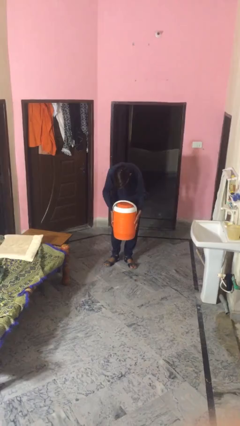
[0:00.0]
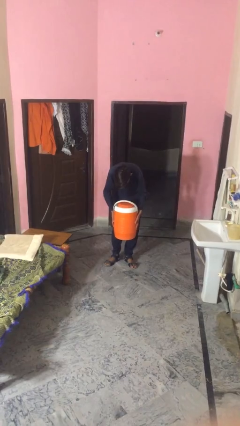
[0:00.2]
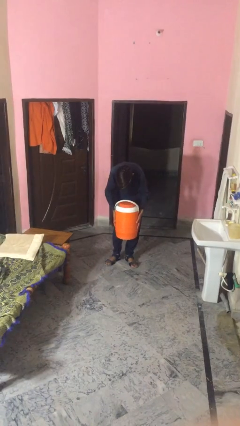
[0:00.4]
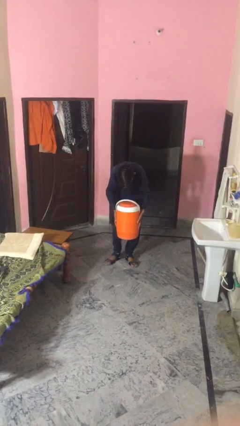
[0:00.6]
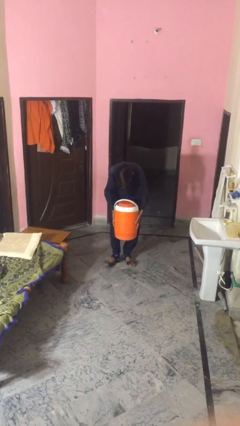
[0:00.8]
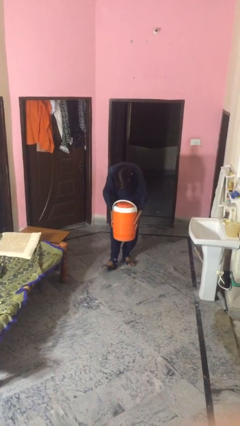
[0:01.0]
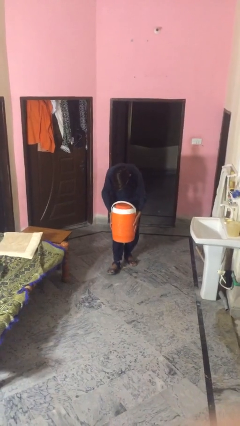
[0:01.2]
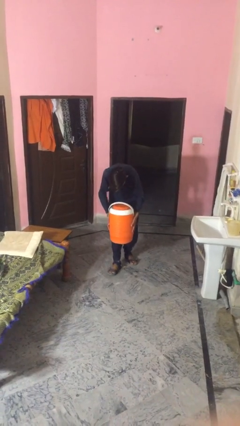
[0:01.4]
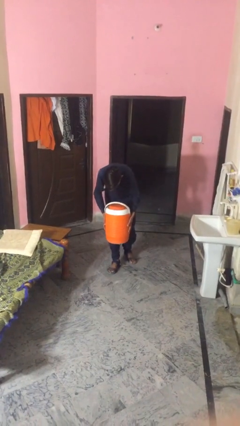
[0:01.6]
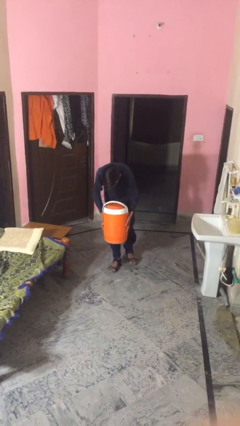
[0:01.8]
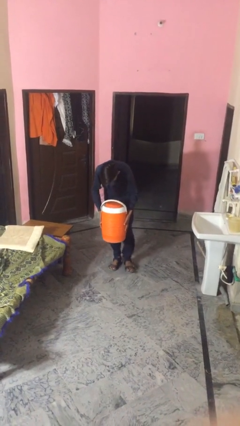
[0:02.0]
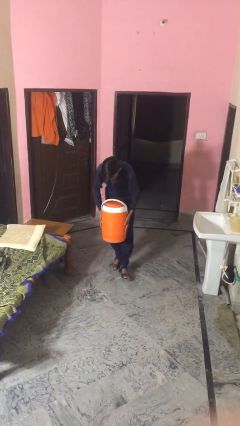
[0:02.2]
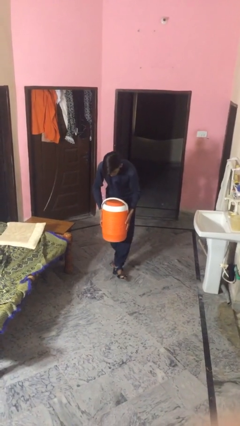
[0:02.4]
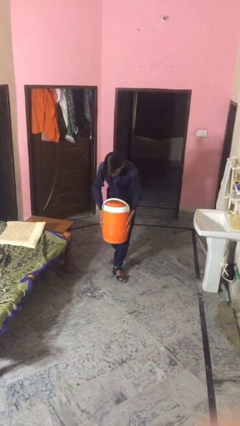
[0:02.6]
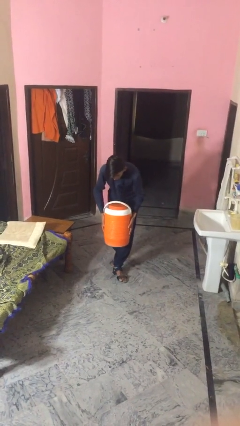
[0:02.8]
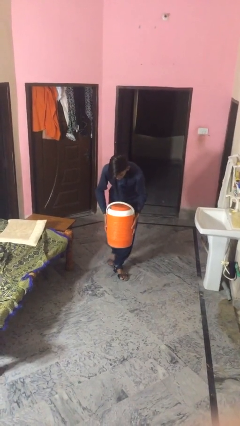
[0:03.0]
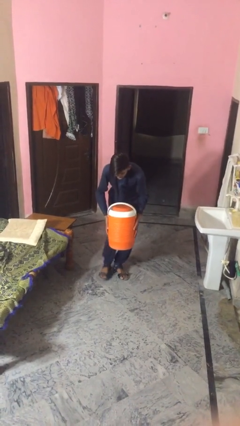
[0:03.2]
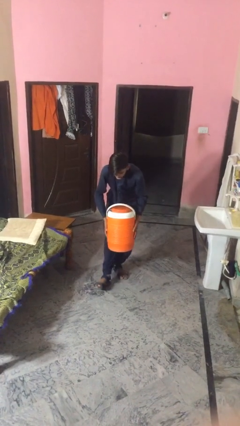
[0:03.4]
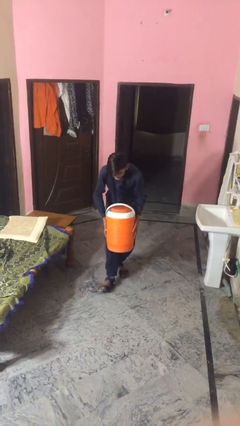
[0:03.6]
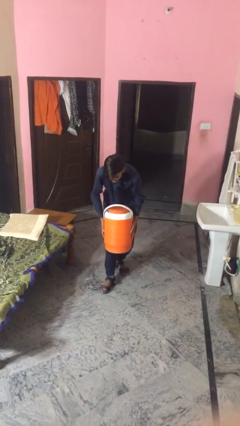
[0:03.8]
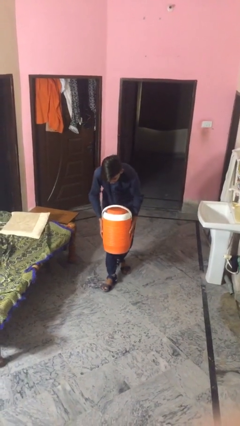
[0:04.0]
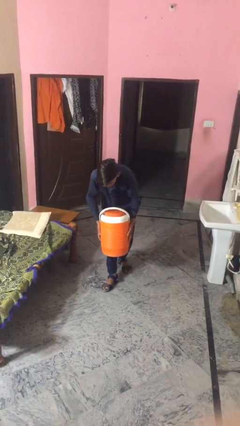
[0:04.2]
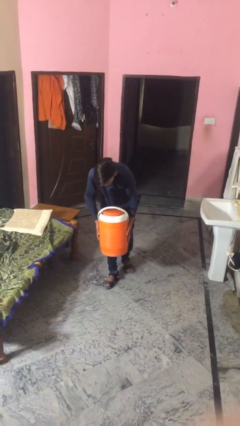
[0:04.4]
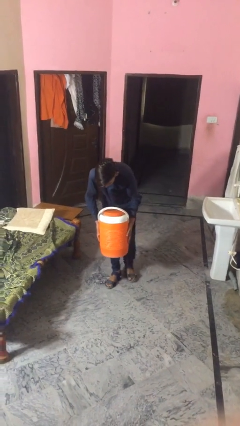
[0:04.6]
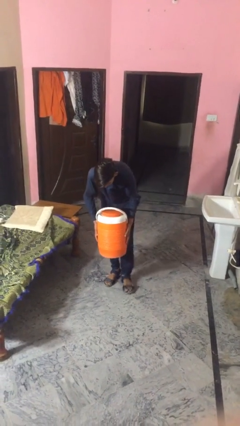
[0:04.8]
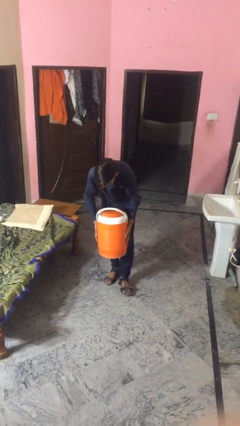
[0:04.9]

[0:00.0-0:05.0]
person carries heavy object

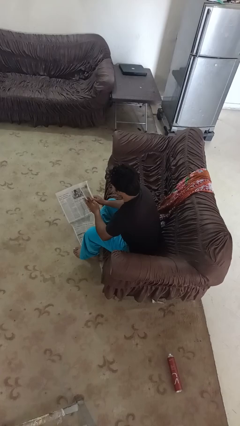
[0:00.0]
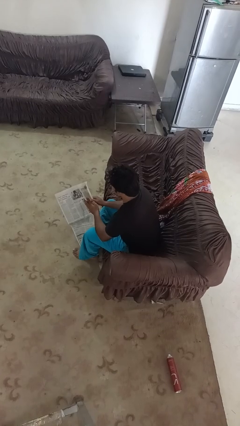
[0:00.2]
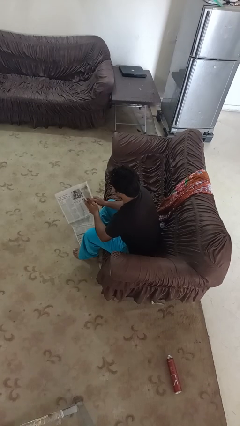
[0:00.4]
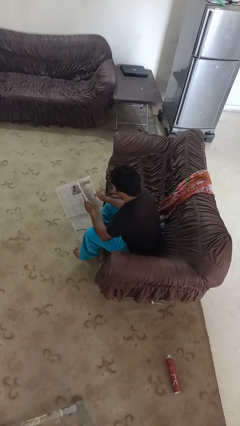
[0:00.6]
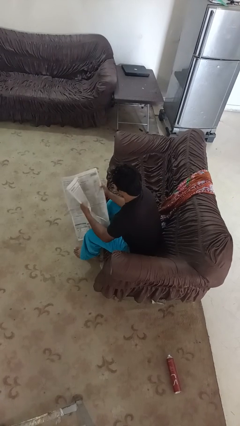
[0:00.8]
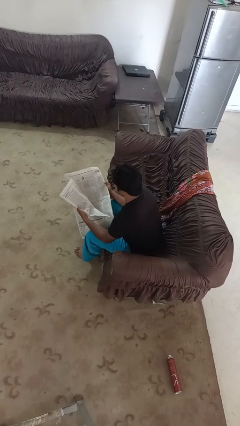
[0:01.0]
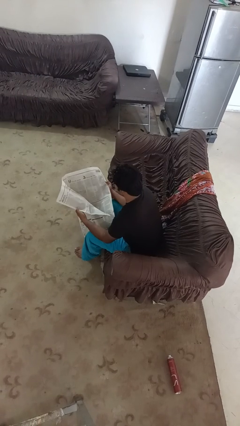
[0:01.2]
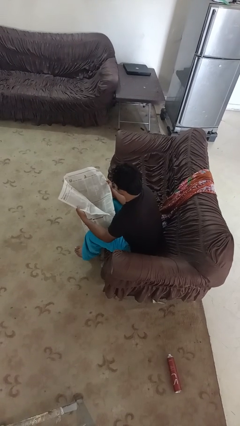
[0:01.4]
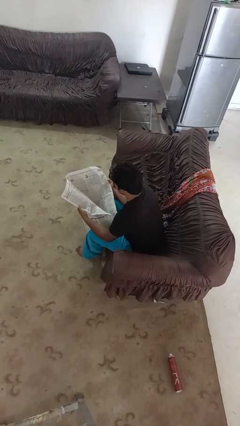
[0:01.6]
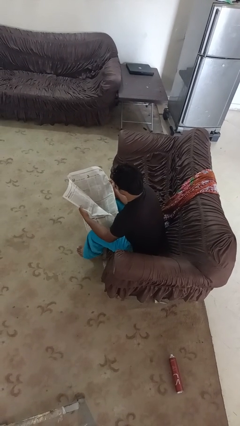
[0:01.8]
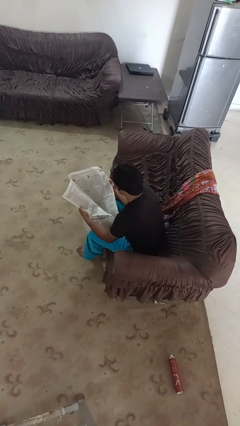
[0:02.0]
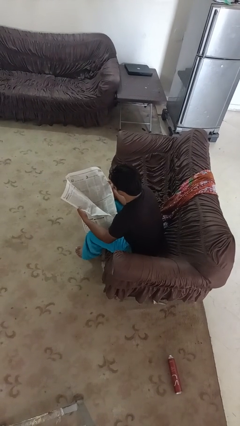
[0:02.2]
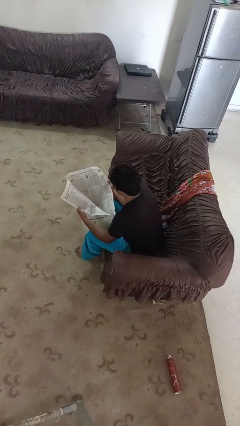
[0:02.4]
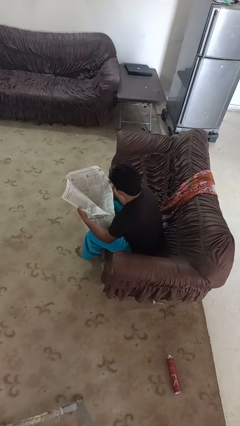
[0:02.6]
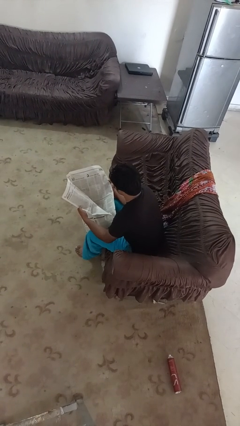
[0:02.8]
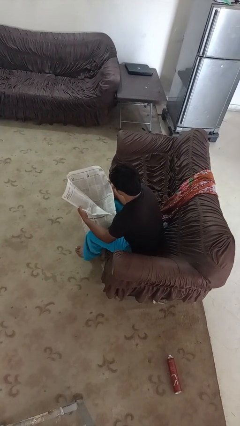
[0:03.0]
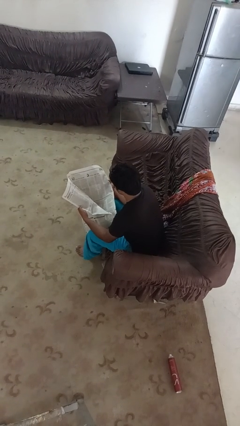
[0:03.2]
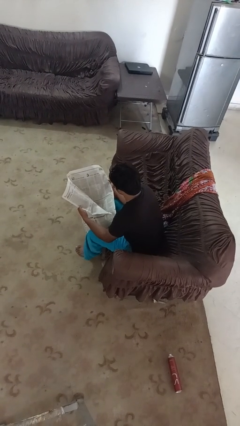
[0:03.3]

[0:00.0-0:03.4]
person reads newspaper

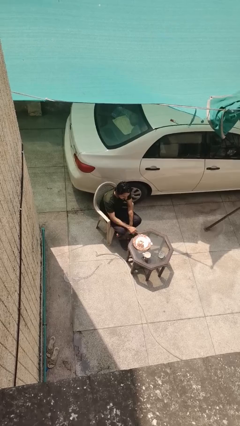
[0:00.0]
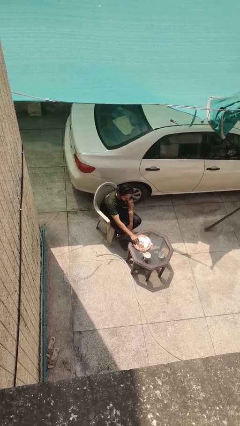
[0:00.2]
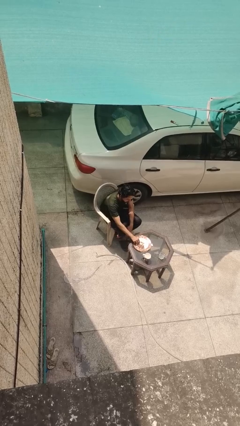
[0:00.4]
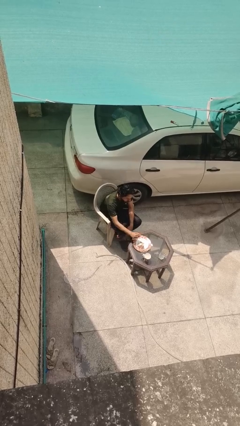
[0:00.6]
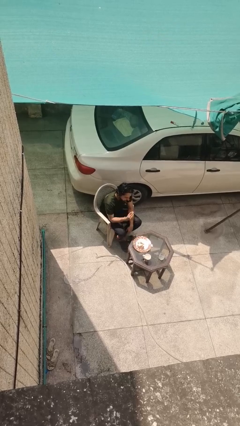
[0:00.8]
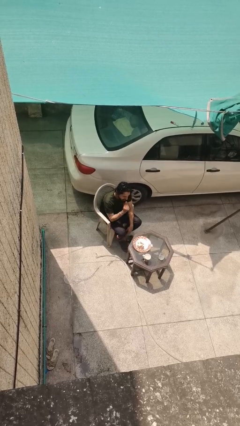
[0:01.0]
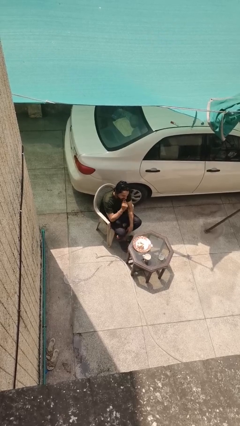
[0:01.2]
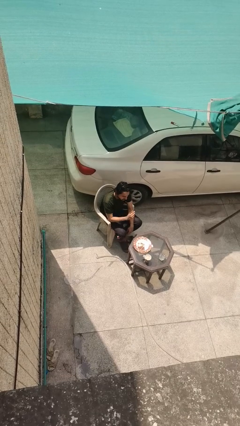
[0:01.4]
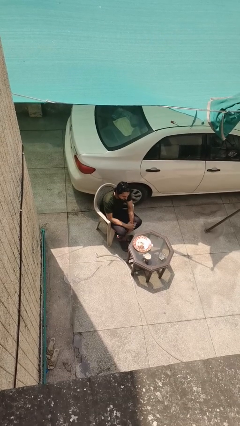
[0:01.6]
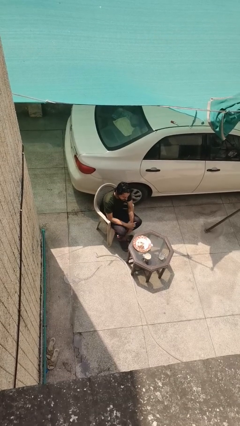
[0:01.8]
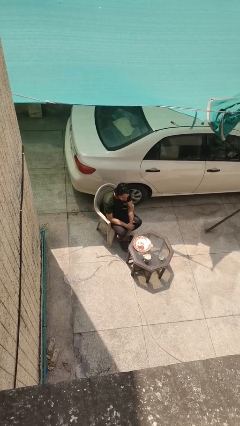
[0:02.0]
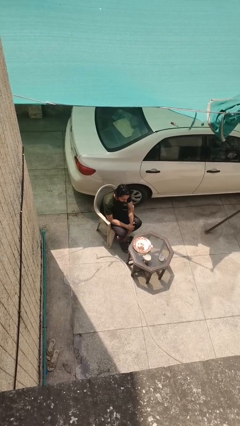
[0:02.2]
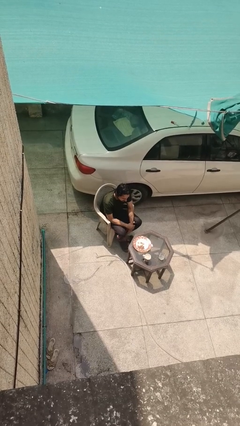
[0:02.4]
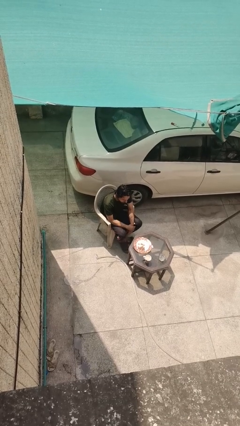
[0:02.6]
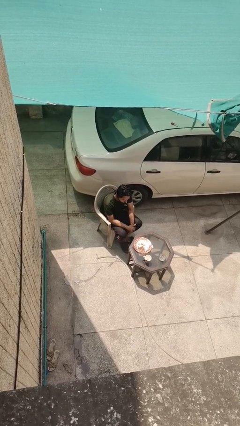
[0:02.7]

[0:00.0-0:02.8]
person eats with hands

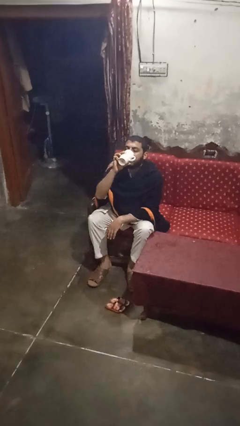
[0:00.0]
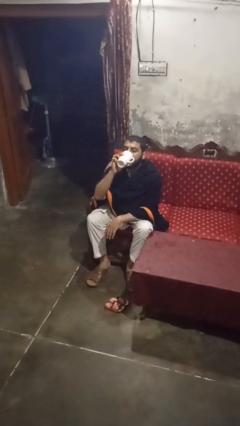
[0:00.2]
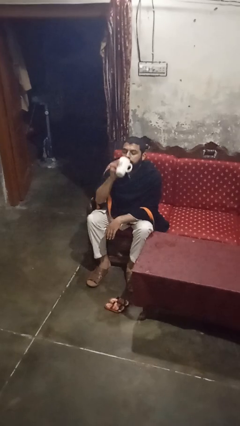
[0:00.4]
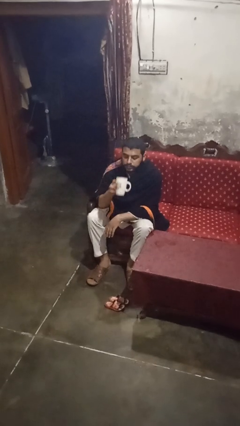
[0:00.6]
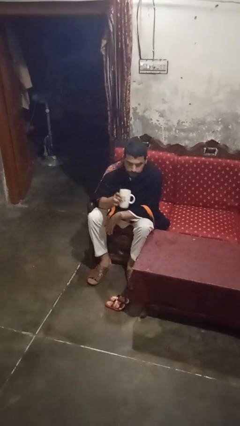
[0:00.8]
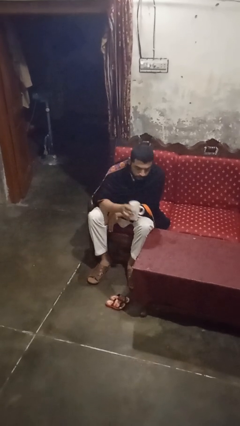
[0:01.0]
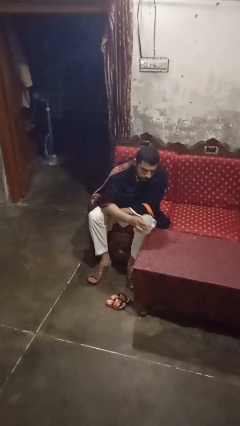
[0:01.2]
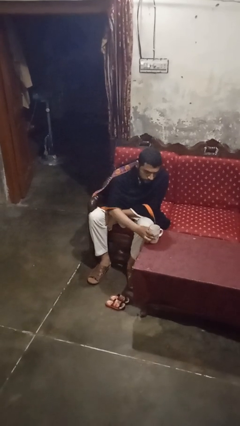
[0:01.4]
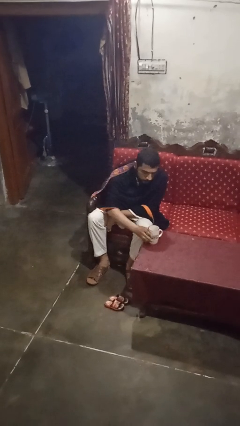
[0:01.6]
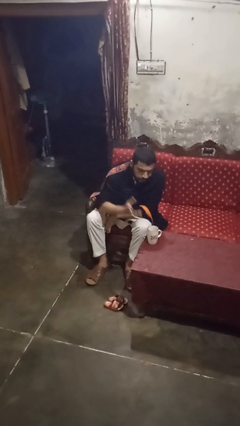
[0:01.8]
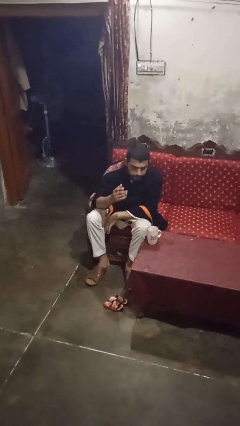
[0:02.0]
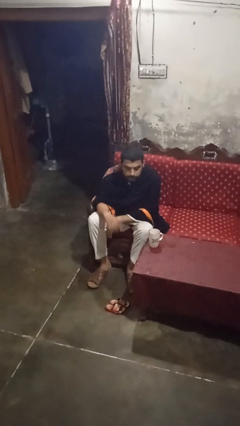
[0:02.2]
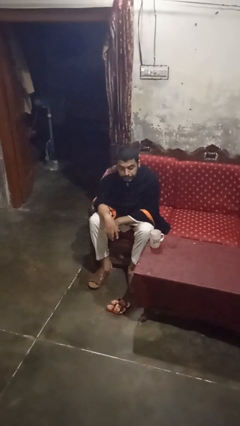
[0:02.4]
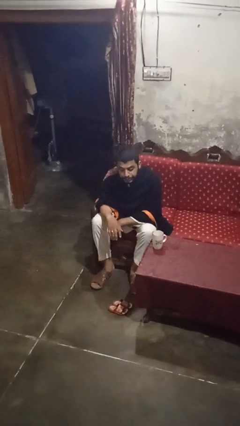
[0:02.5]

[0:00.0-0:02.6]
person puts down object on table

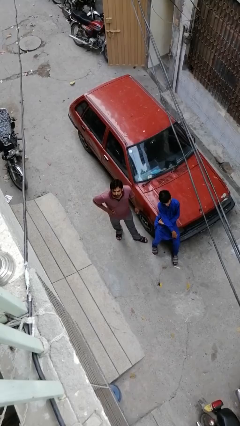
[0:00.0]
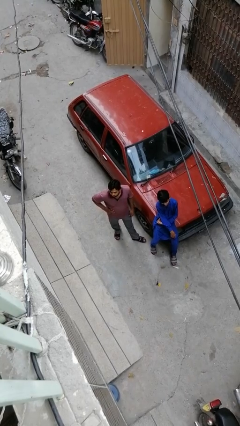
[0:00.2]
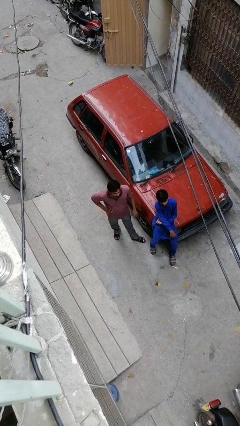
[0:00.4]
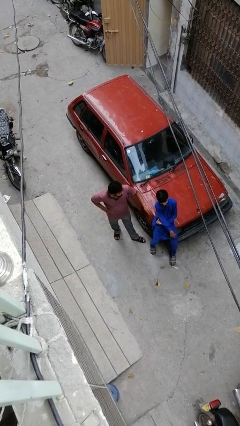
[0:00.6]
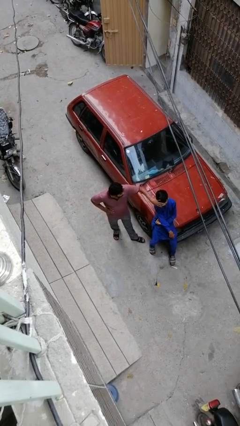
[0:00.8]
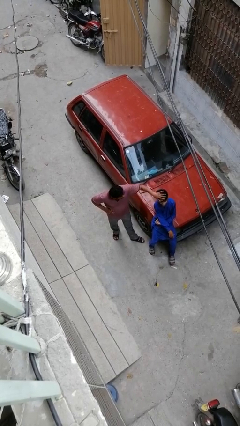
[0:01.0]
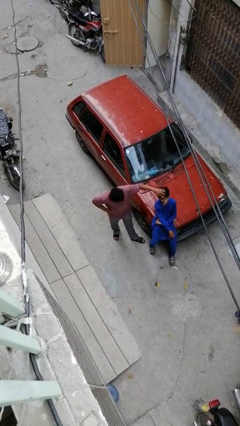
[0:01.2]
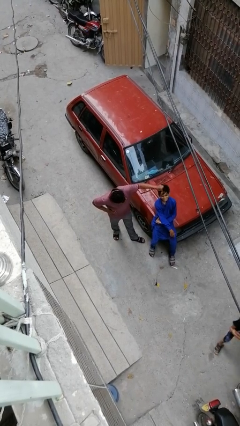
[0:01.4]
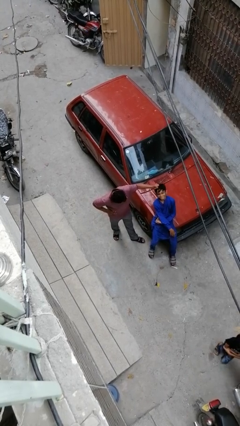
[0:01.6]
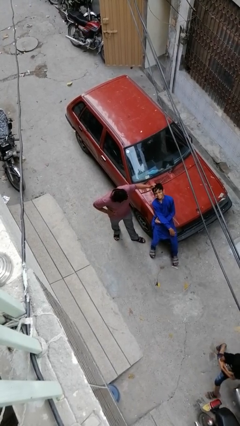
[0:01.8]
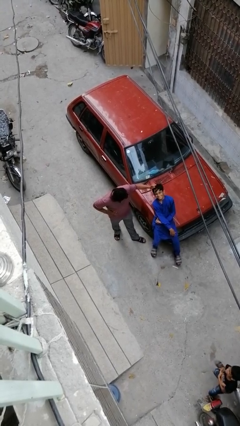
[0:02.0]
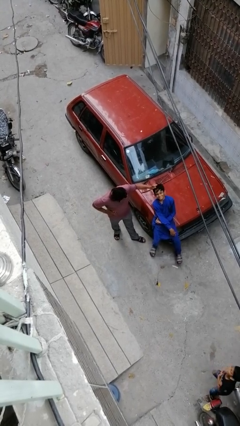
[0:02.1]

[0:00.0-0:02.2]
person grabs person by hair

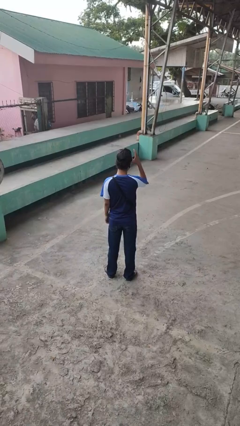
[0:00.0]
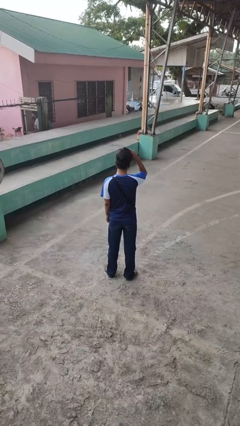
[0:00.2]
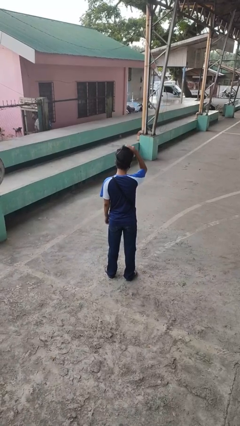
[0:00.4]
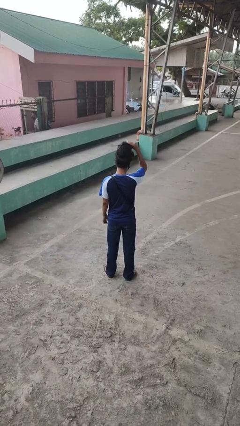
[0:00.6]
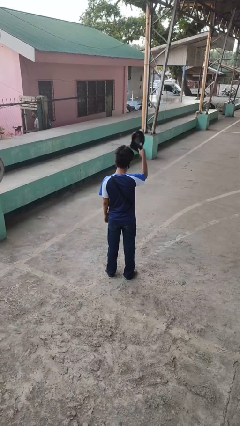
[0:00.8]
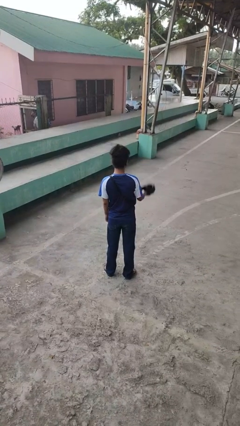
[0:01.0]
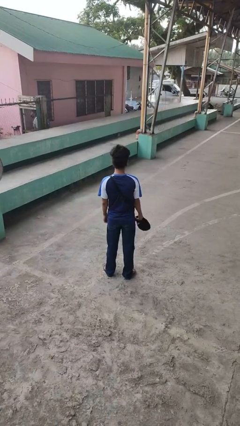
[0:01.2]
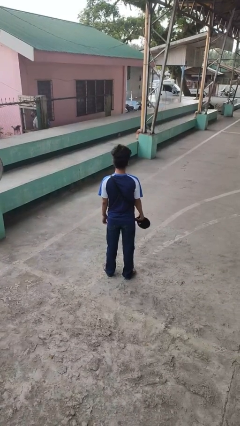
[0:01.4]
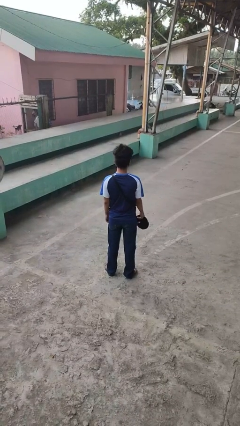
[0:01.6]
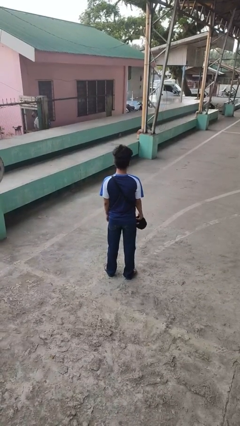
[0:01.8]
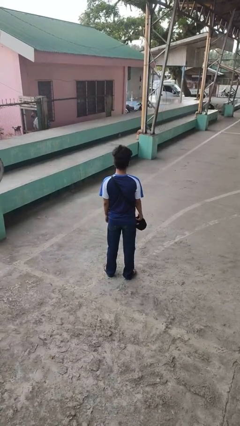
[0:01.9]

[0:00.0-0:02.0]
person takes off hat
